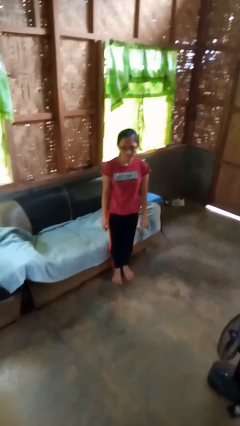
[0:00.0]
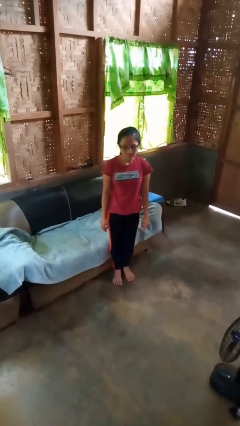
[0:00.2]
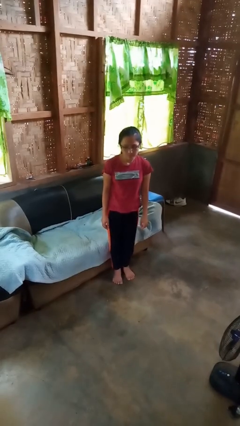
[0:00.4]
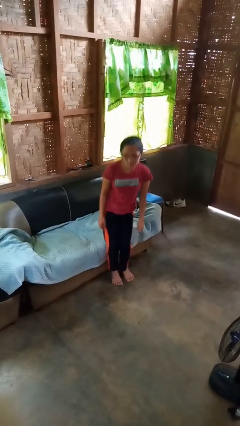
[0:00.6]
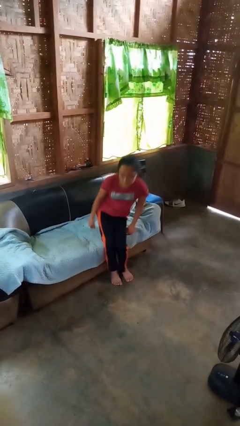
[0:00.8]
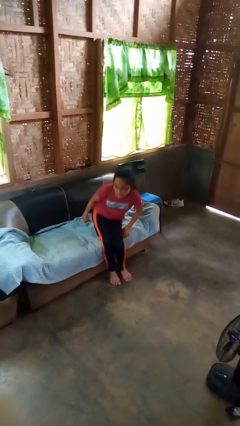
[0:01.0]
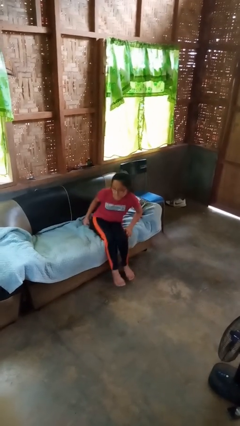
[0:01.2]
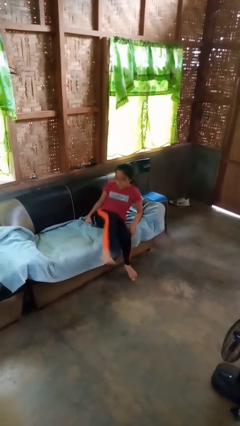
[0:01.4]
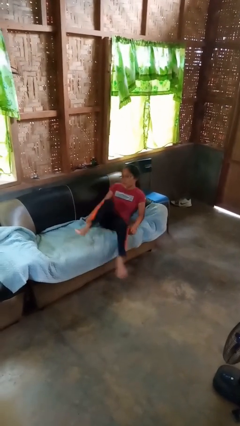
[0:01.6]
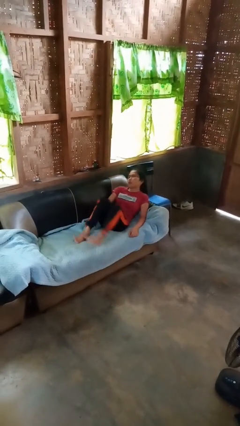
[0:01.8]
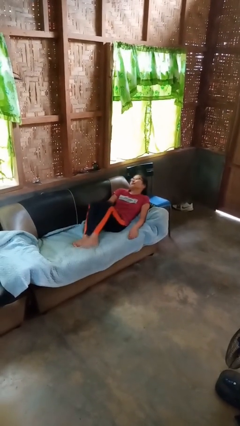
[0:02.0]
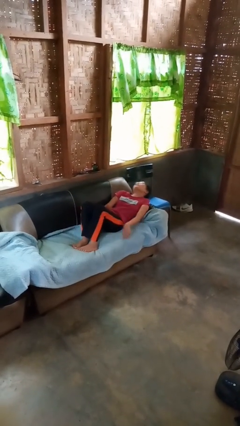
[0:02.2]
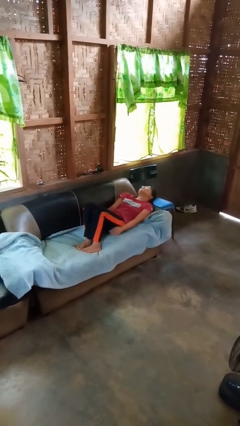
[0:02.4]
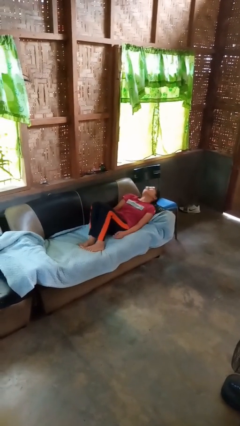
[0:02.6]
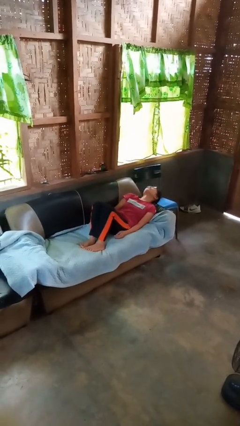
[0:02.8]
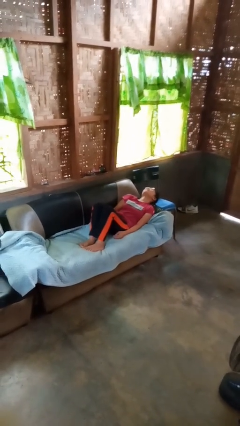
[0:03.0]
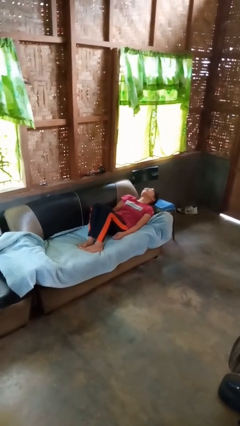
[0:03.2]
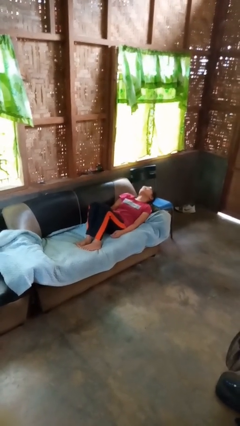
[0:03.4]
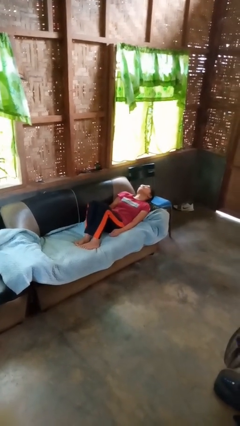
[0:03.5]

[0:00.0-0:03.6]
person lies down on couch

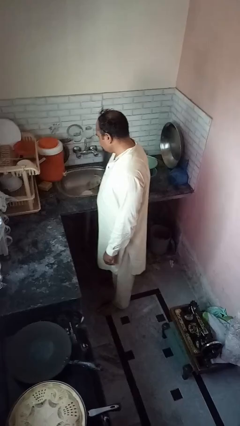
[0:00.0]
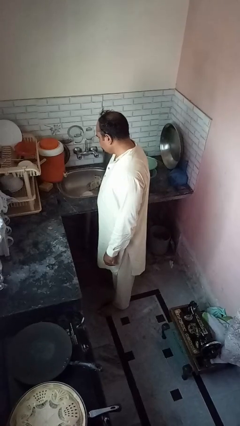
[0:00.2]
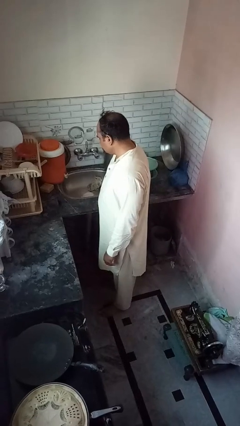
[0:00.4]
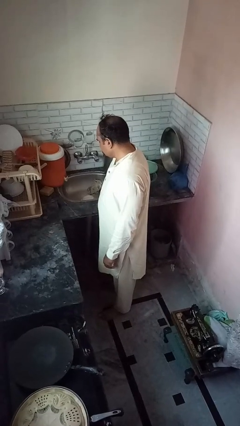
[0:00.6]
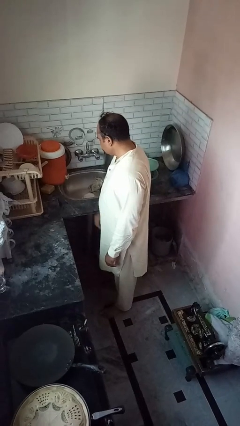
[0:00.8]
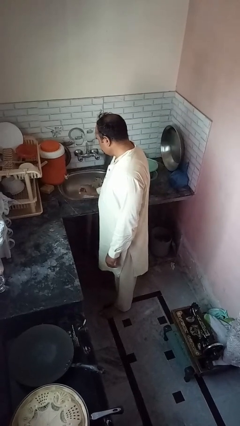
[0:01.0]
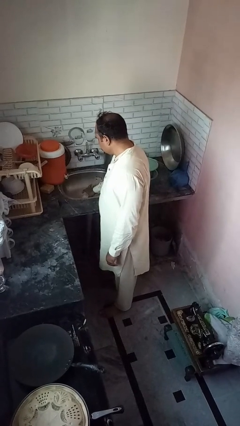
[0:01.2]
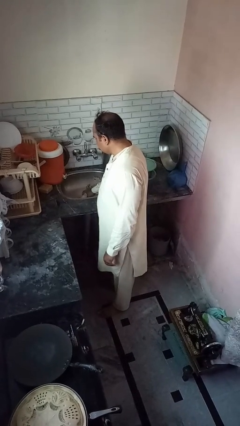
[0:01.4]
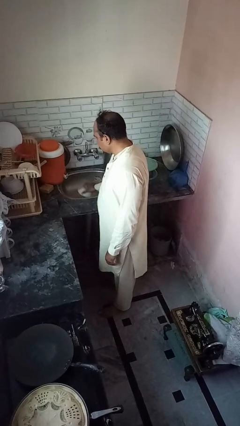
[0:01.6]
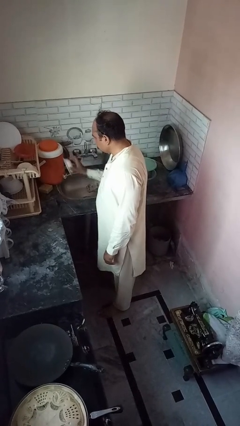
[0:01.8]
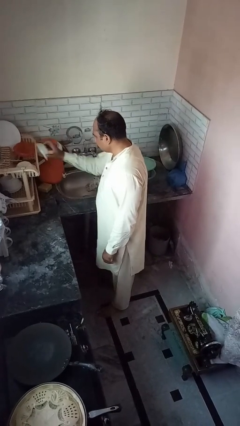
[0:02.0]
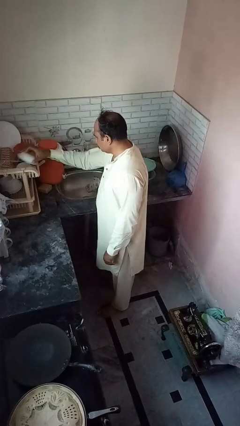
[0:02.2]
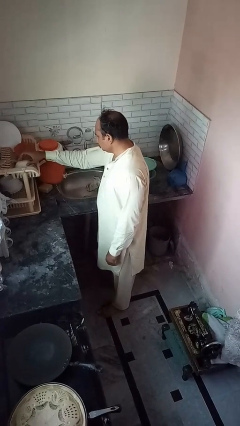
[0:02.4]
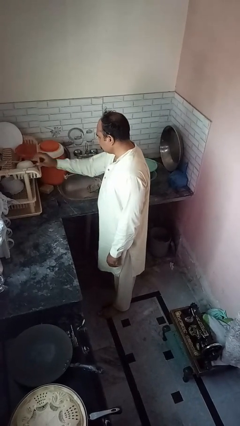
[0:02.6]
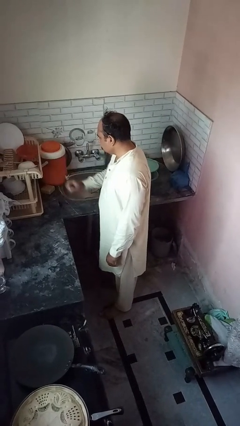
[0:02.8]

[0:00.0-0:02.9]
person unloads dishwasher

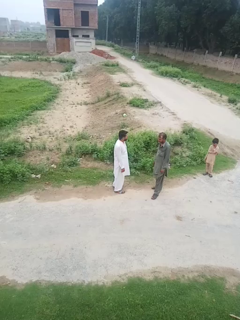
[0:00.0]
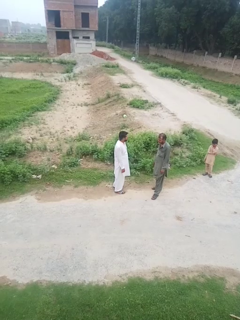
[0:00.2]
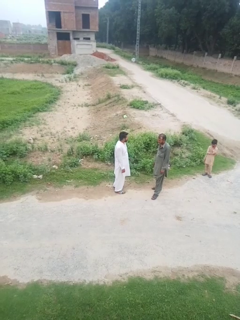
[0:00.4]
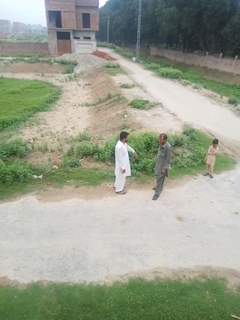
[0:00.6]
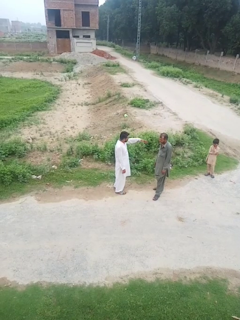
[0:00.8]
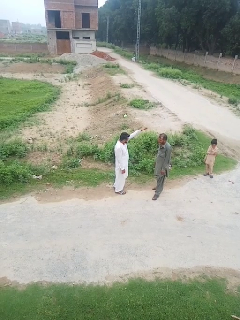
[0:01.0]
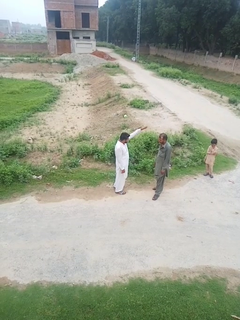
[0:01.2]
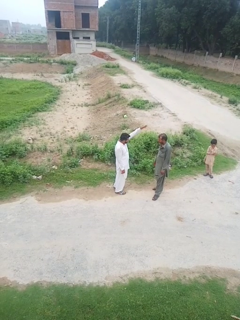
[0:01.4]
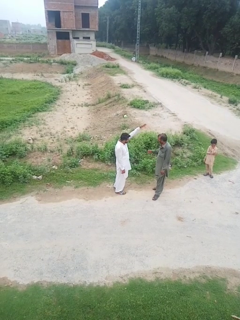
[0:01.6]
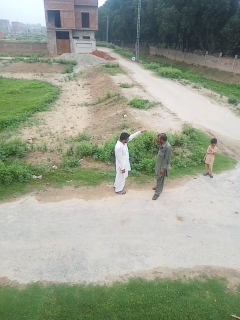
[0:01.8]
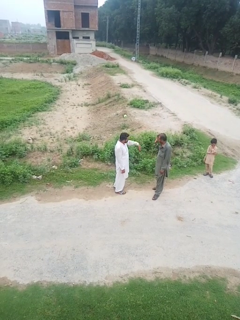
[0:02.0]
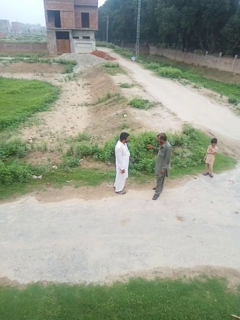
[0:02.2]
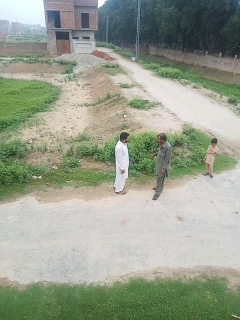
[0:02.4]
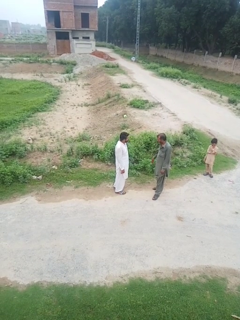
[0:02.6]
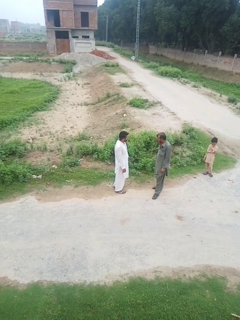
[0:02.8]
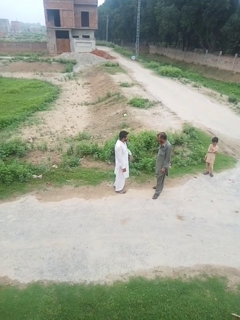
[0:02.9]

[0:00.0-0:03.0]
person shoves person

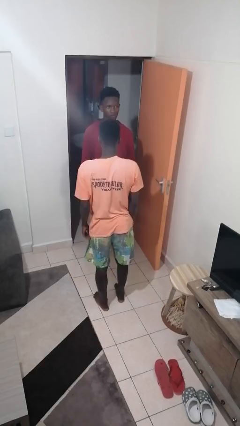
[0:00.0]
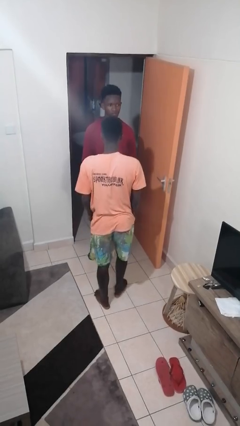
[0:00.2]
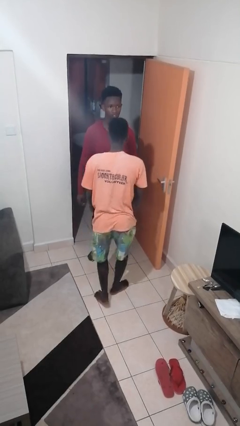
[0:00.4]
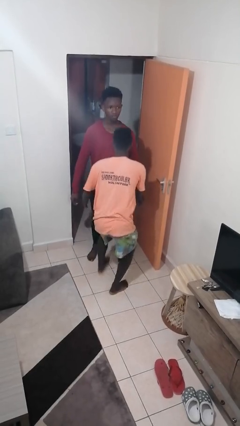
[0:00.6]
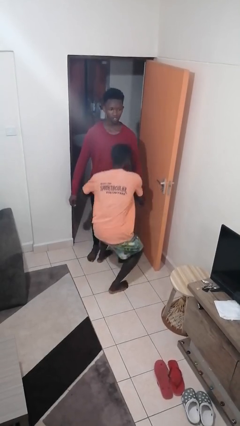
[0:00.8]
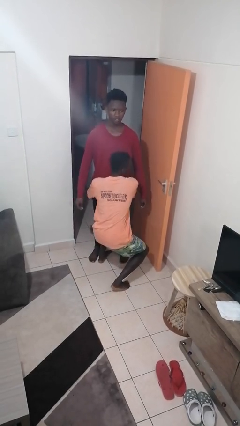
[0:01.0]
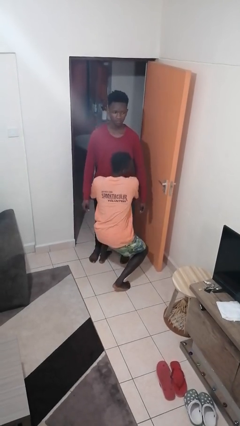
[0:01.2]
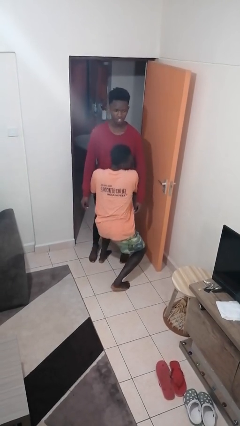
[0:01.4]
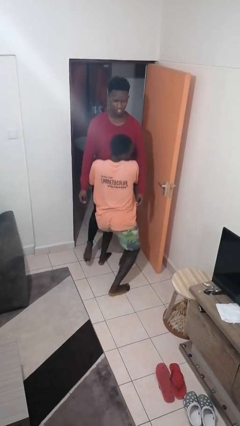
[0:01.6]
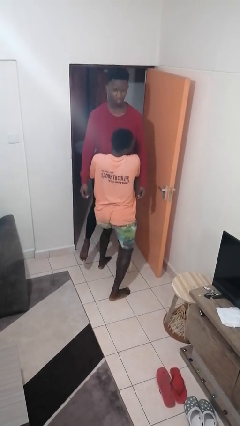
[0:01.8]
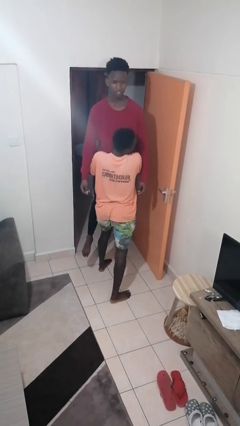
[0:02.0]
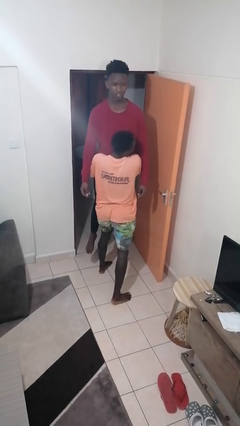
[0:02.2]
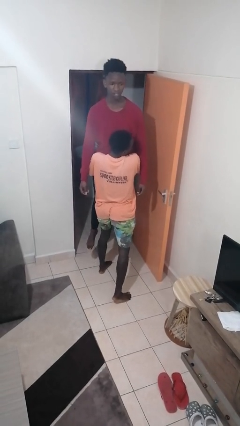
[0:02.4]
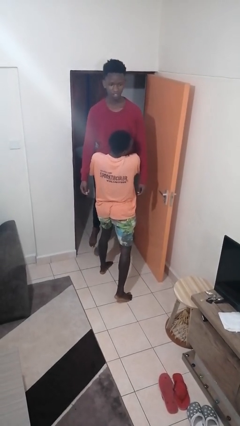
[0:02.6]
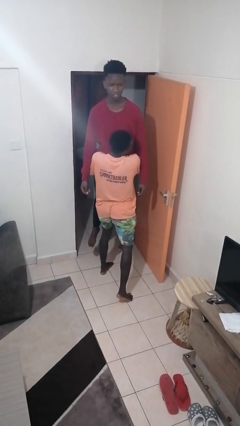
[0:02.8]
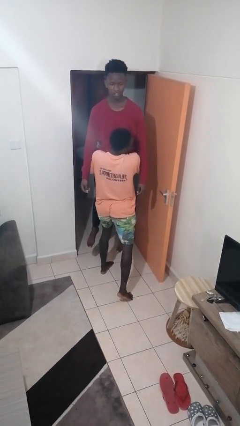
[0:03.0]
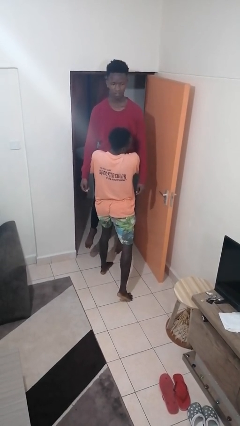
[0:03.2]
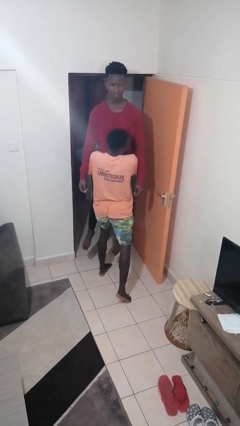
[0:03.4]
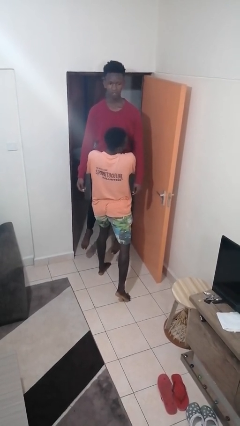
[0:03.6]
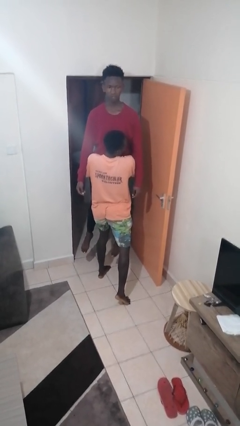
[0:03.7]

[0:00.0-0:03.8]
person picks up person

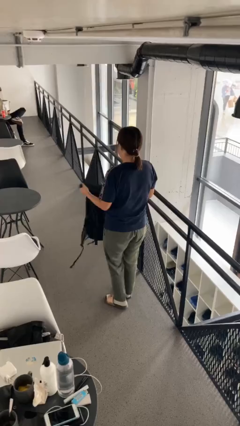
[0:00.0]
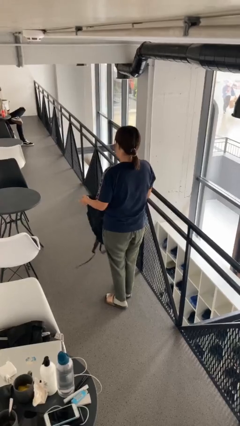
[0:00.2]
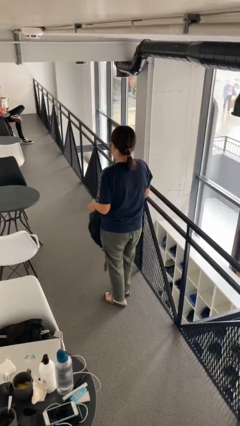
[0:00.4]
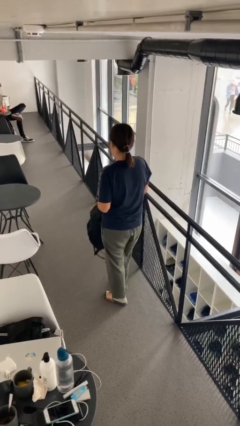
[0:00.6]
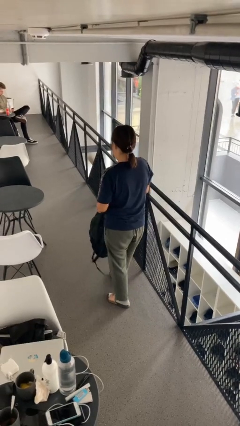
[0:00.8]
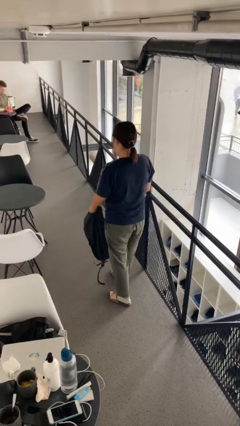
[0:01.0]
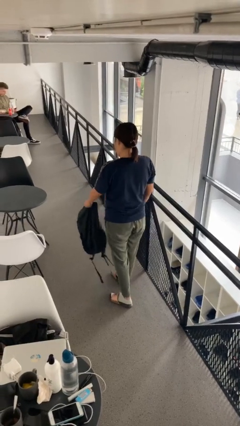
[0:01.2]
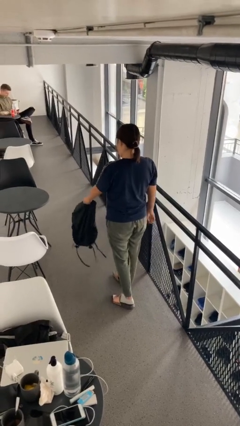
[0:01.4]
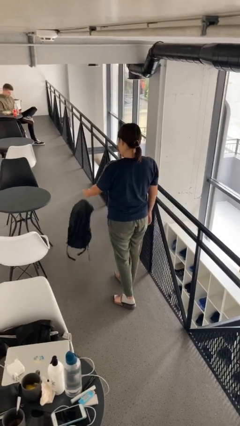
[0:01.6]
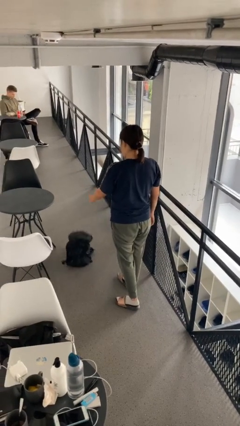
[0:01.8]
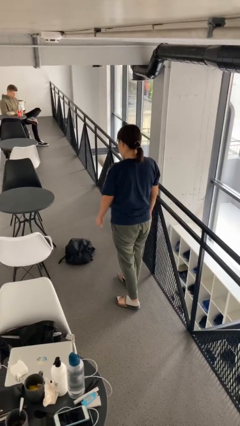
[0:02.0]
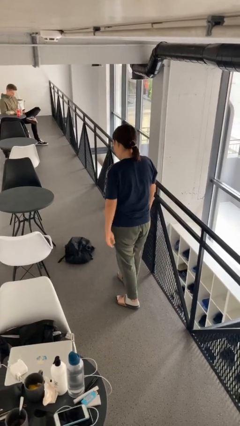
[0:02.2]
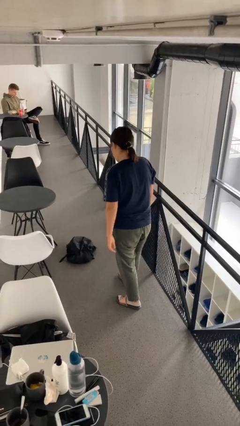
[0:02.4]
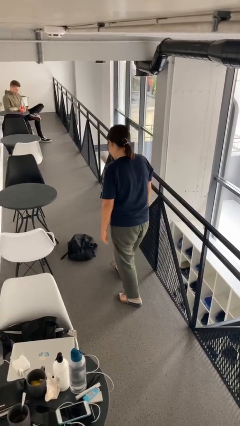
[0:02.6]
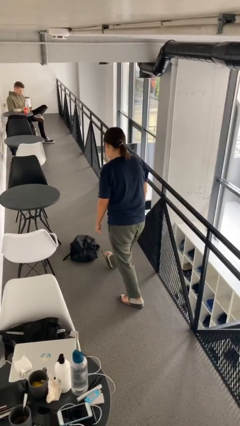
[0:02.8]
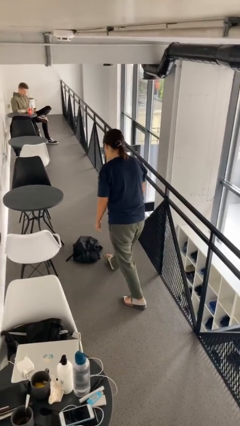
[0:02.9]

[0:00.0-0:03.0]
person throws object to ground

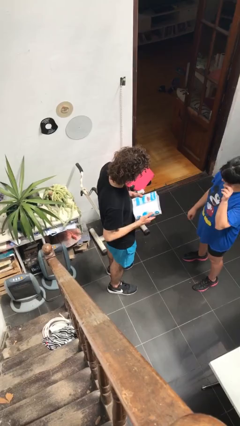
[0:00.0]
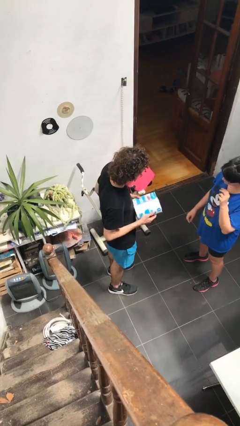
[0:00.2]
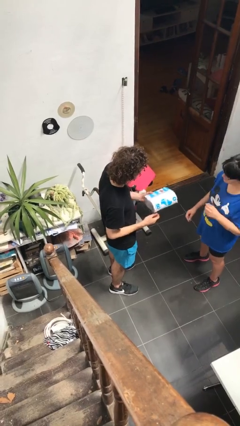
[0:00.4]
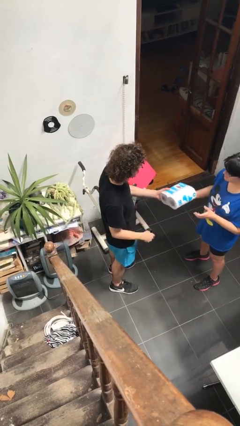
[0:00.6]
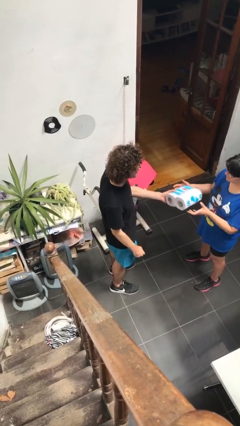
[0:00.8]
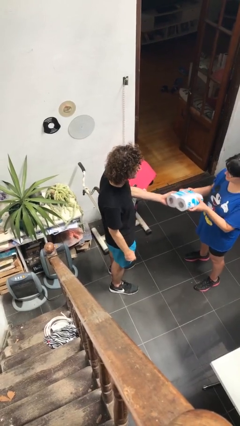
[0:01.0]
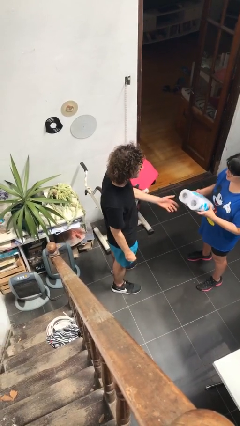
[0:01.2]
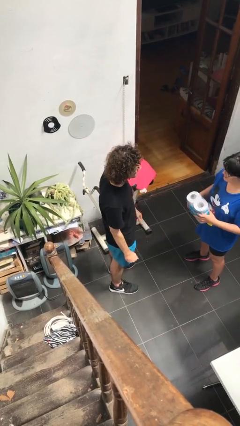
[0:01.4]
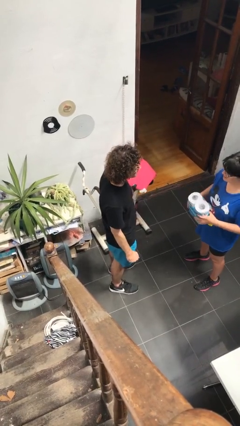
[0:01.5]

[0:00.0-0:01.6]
person transfers object to person

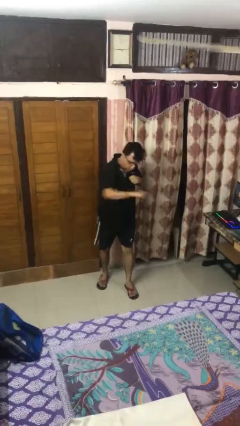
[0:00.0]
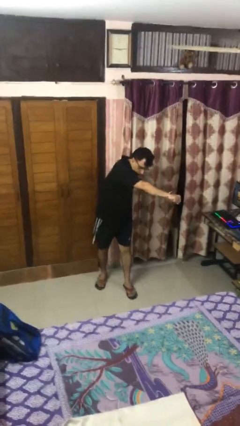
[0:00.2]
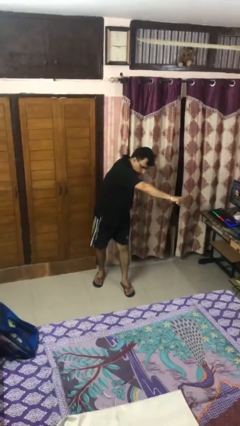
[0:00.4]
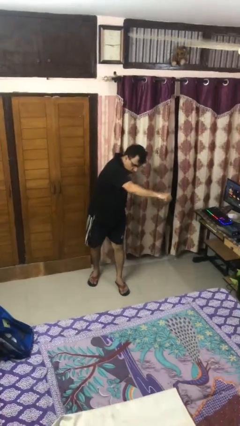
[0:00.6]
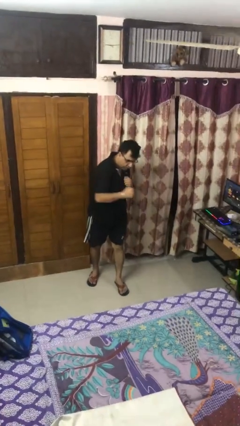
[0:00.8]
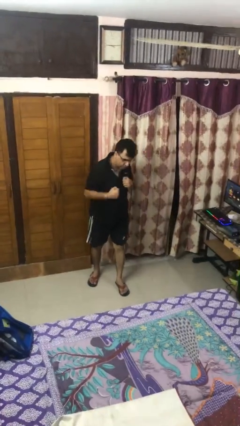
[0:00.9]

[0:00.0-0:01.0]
person punches
